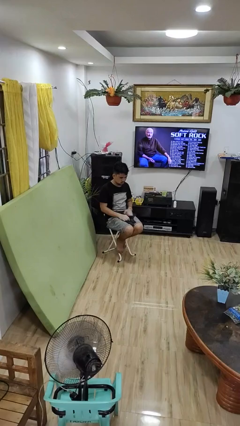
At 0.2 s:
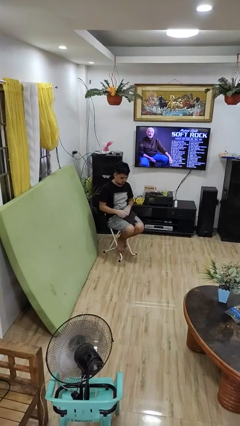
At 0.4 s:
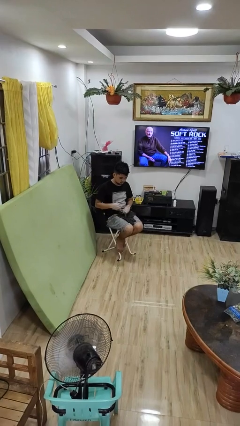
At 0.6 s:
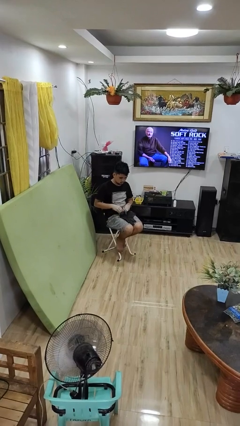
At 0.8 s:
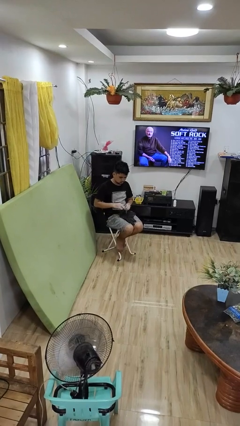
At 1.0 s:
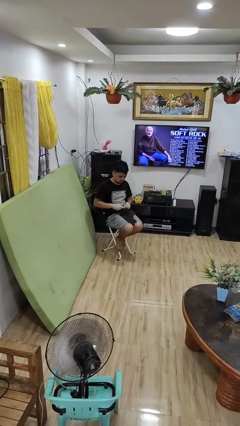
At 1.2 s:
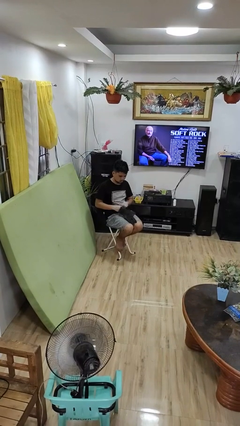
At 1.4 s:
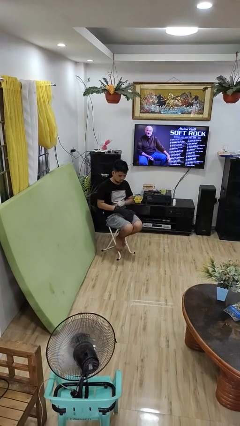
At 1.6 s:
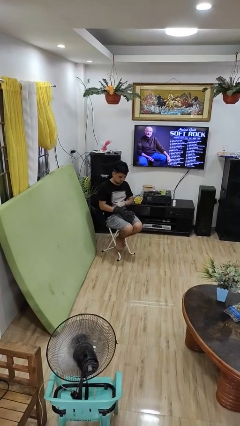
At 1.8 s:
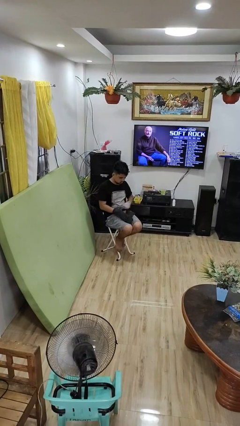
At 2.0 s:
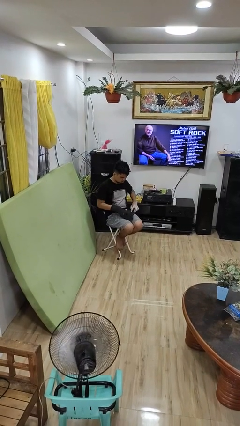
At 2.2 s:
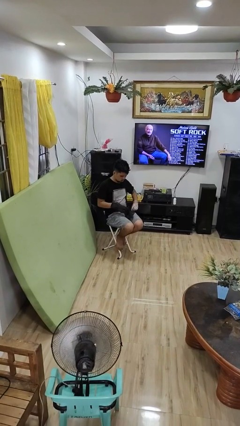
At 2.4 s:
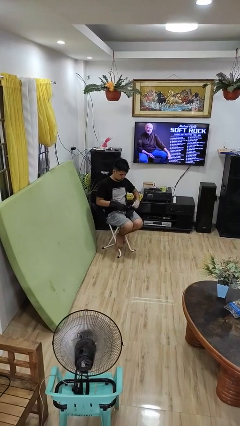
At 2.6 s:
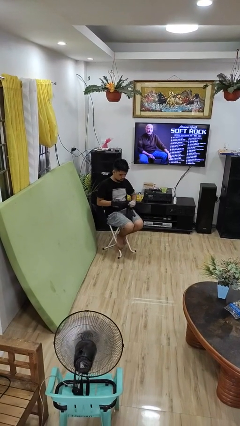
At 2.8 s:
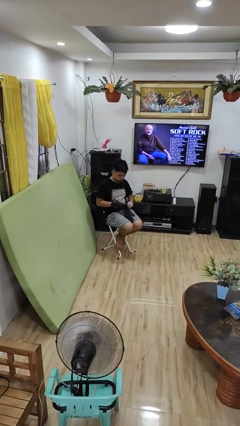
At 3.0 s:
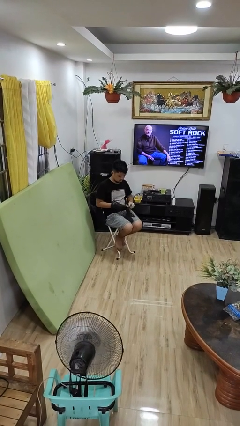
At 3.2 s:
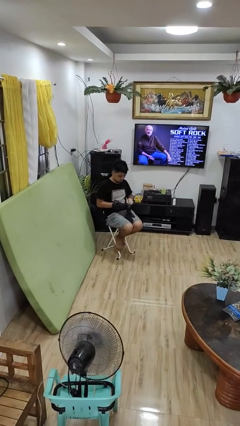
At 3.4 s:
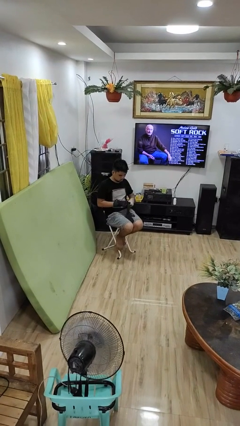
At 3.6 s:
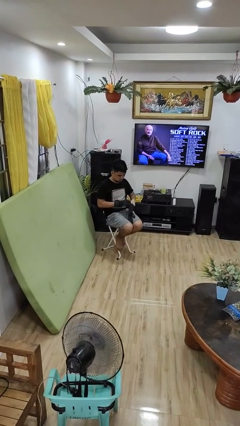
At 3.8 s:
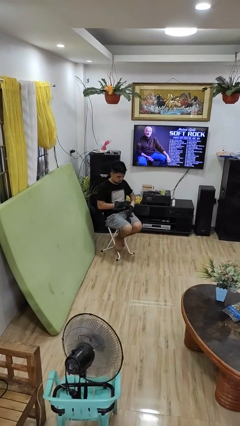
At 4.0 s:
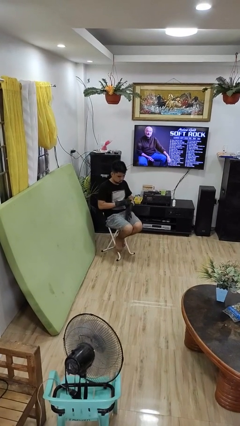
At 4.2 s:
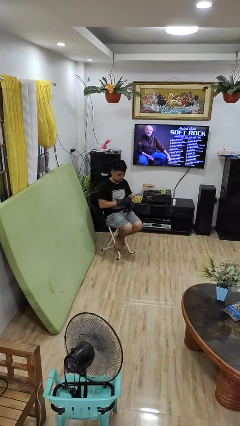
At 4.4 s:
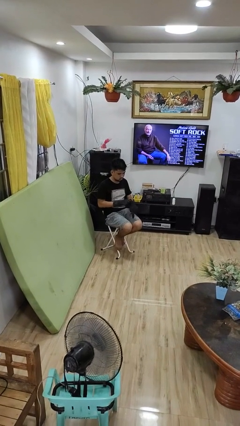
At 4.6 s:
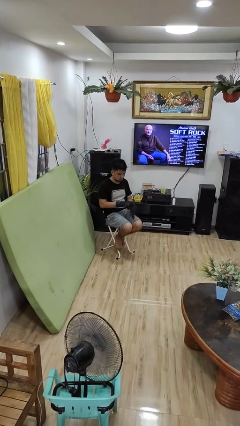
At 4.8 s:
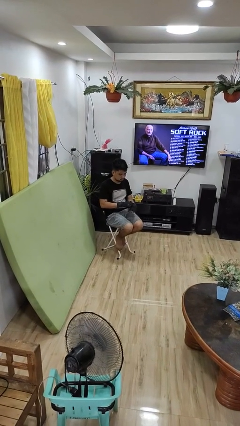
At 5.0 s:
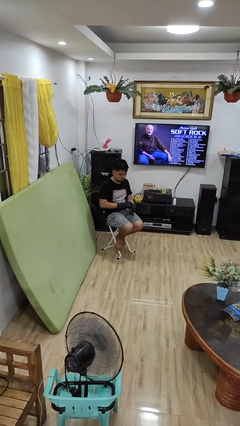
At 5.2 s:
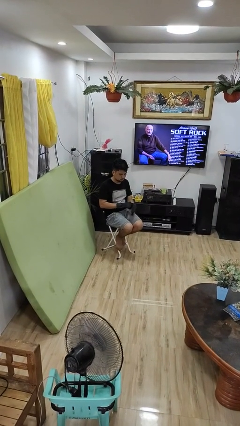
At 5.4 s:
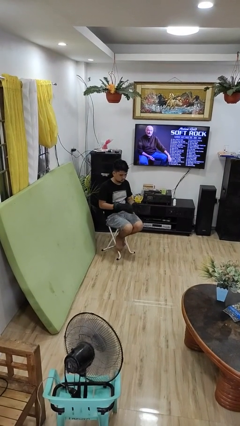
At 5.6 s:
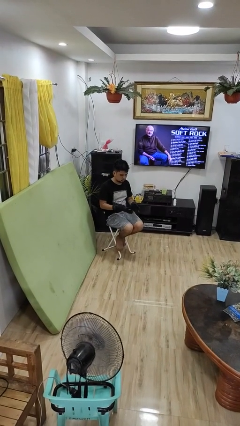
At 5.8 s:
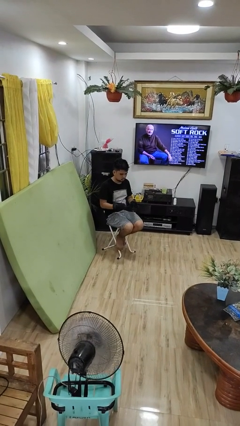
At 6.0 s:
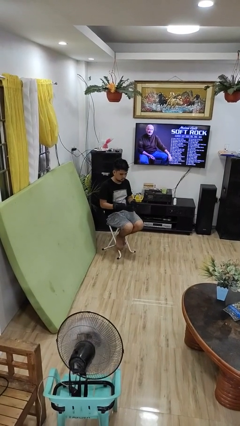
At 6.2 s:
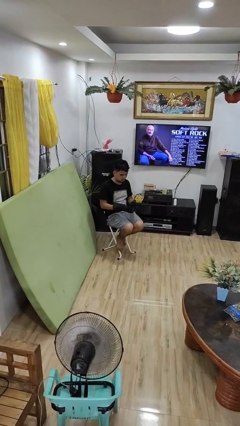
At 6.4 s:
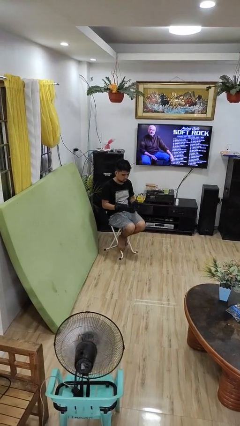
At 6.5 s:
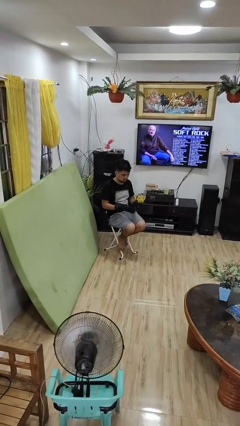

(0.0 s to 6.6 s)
person puts on gloves

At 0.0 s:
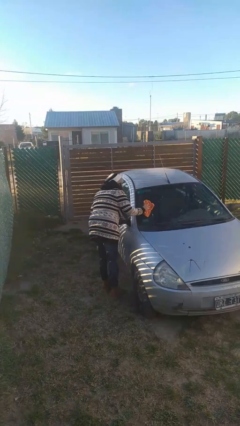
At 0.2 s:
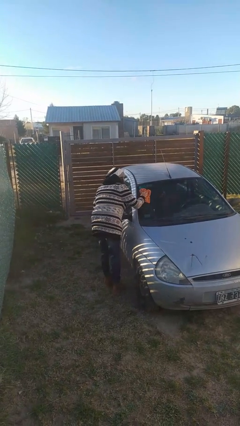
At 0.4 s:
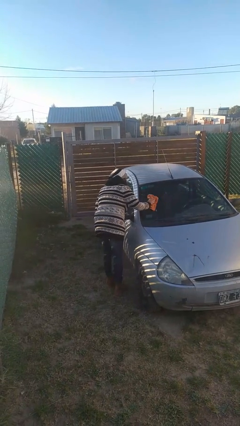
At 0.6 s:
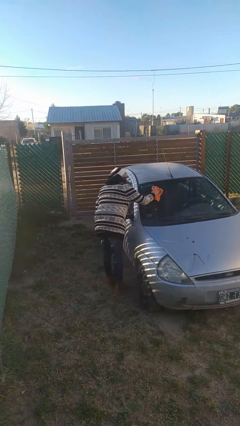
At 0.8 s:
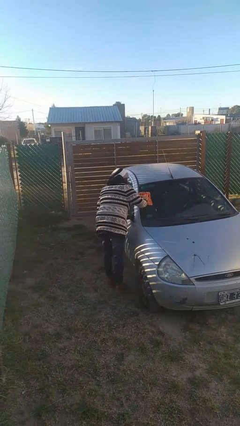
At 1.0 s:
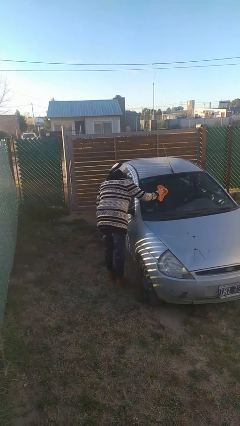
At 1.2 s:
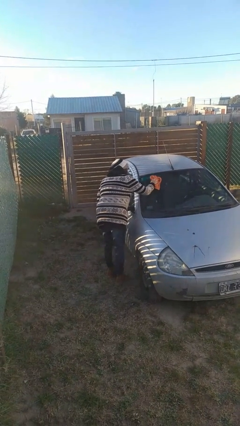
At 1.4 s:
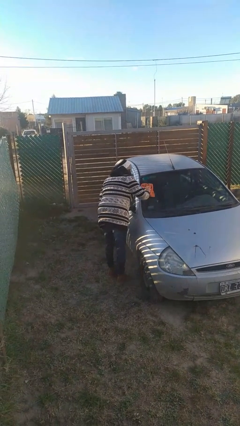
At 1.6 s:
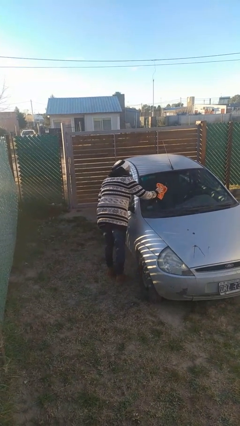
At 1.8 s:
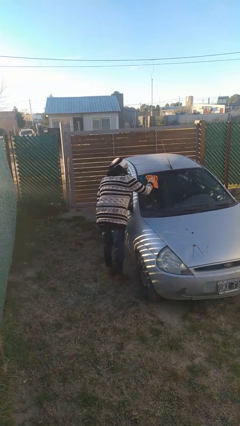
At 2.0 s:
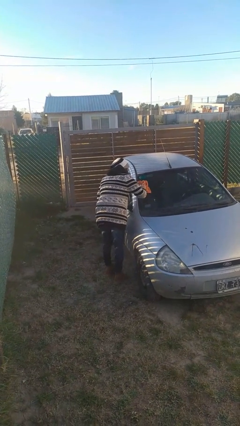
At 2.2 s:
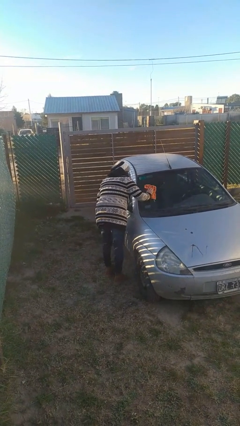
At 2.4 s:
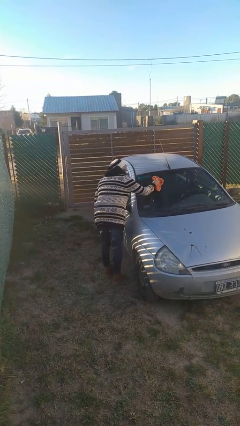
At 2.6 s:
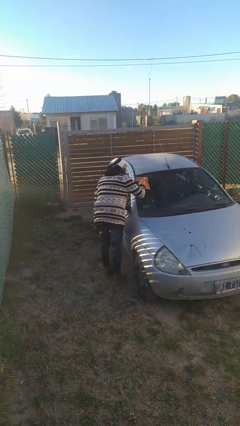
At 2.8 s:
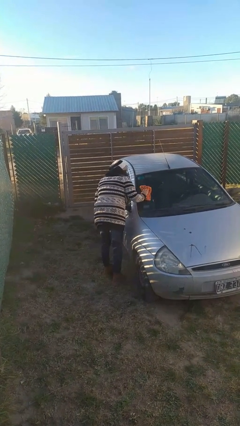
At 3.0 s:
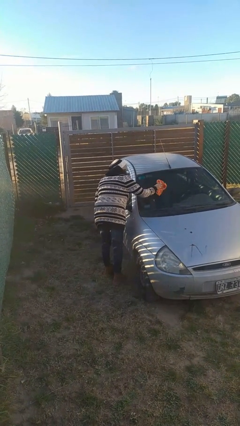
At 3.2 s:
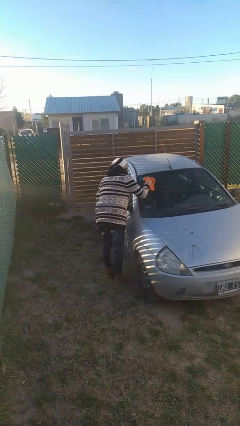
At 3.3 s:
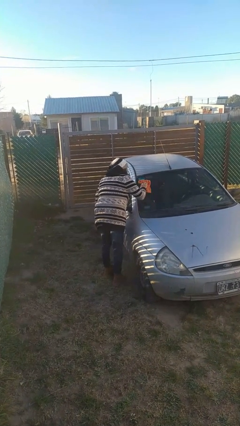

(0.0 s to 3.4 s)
person polishes car with rag

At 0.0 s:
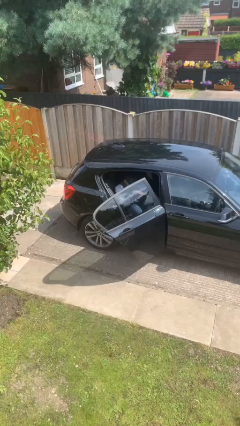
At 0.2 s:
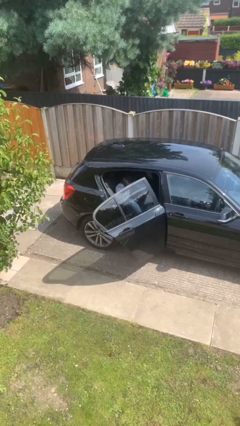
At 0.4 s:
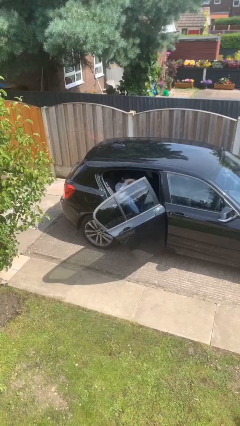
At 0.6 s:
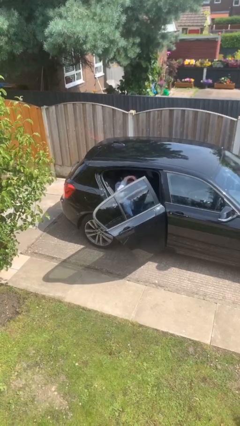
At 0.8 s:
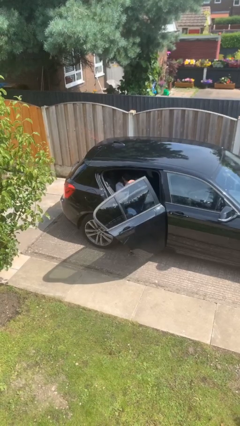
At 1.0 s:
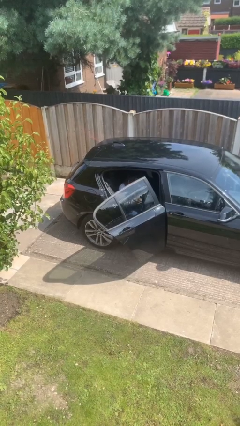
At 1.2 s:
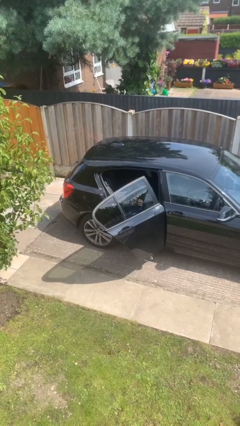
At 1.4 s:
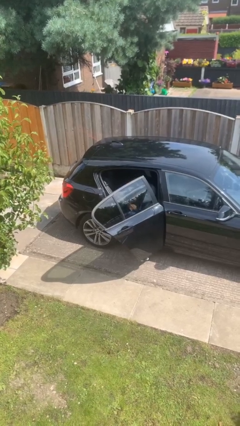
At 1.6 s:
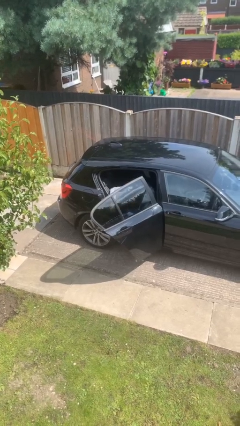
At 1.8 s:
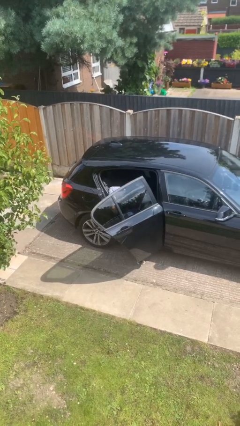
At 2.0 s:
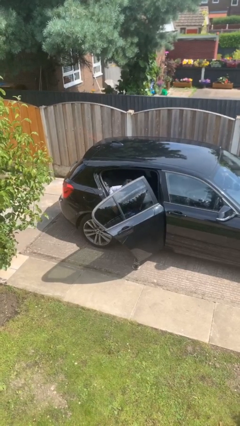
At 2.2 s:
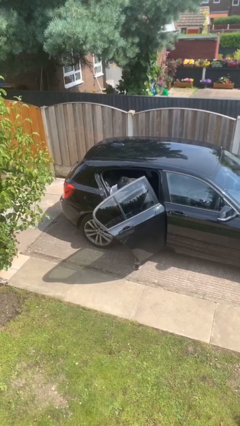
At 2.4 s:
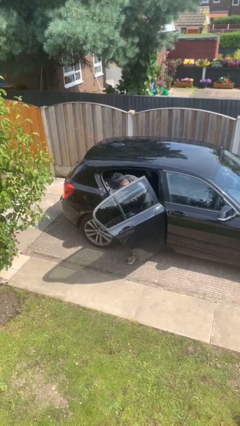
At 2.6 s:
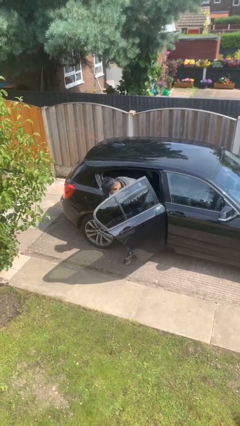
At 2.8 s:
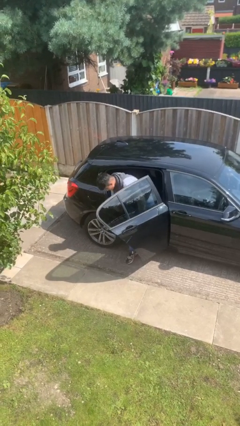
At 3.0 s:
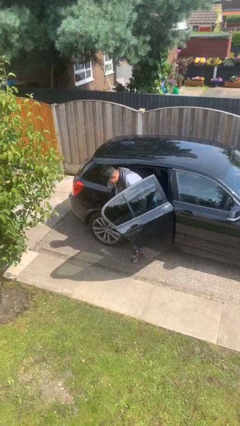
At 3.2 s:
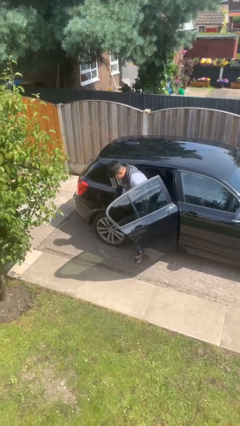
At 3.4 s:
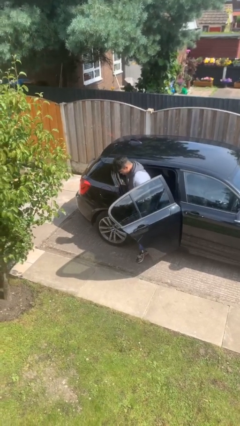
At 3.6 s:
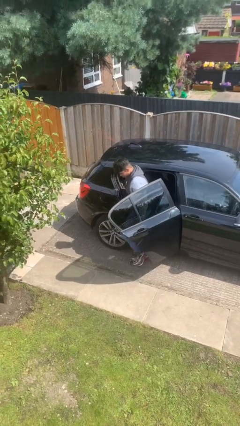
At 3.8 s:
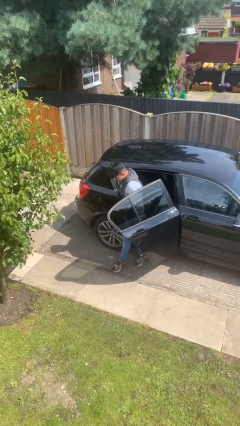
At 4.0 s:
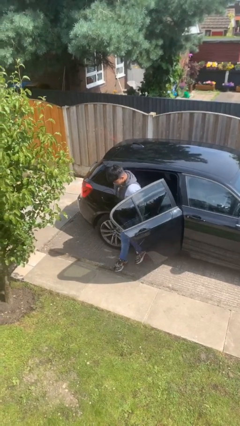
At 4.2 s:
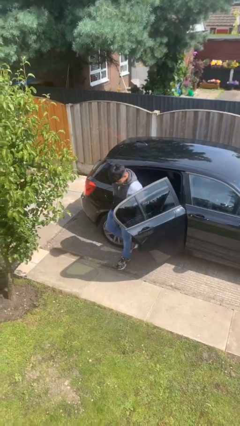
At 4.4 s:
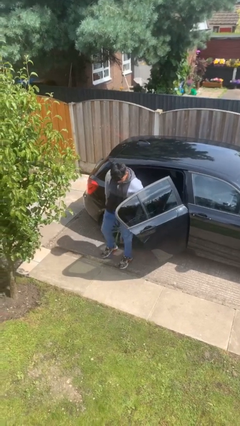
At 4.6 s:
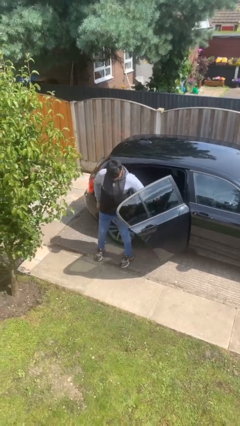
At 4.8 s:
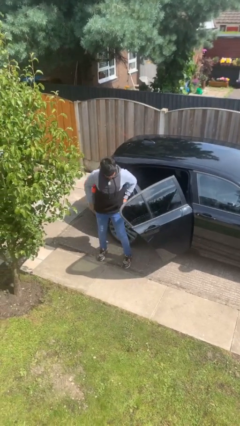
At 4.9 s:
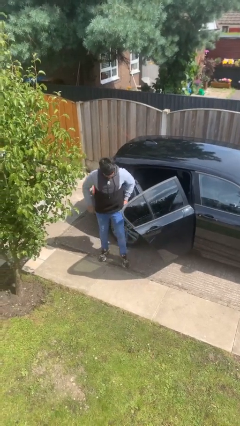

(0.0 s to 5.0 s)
person exits car

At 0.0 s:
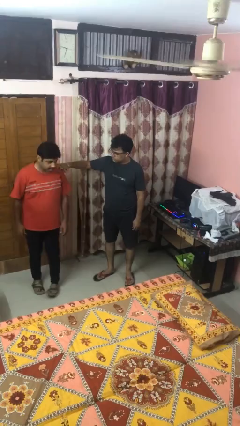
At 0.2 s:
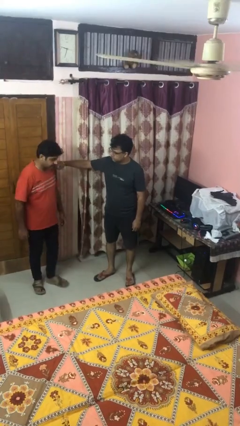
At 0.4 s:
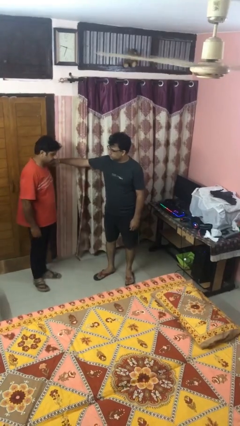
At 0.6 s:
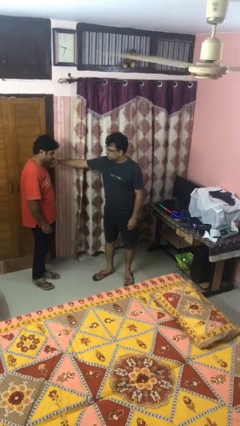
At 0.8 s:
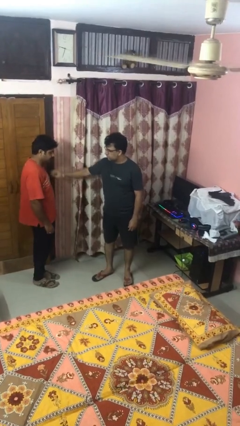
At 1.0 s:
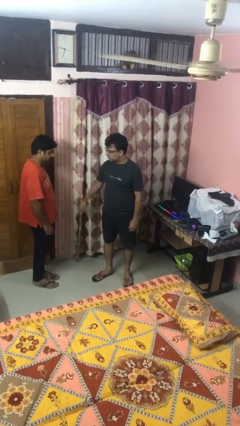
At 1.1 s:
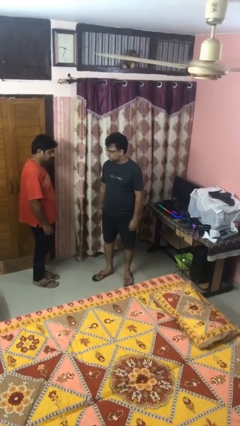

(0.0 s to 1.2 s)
person spins person around

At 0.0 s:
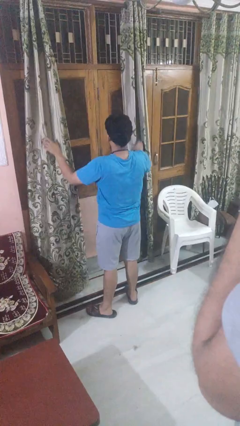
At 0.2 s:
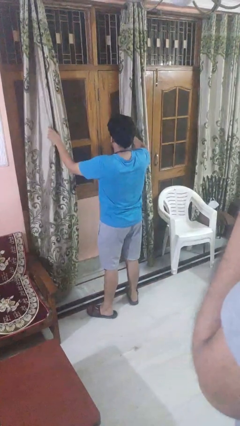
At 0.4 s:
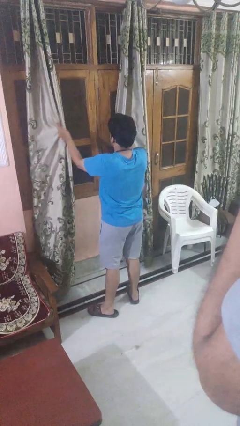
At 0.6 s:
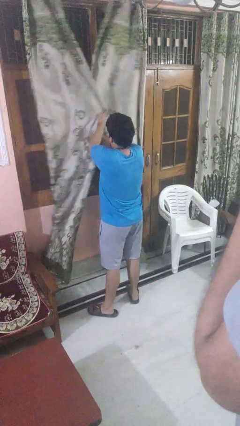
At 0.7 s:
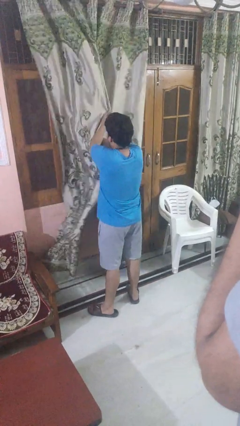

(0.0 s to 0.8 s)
person closes curtains

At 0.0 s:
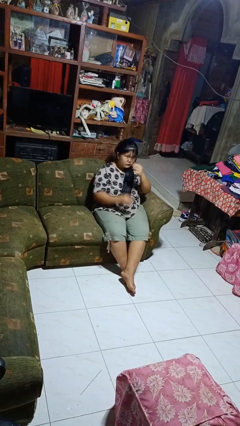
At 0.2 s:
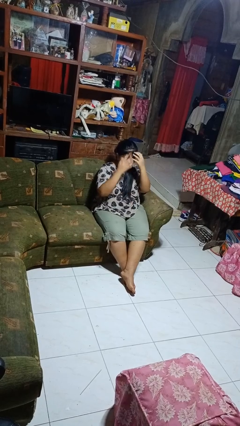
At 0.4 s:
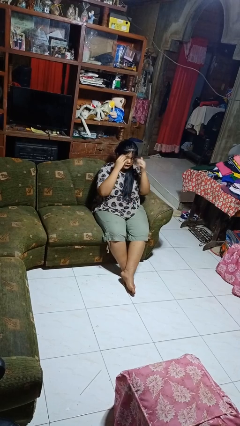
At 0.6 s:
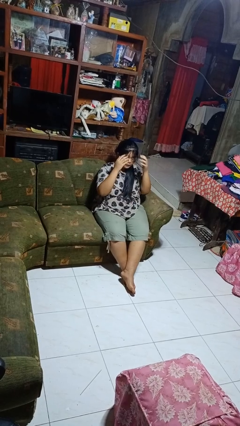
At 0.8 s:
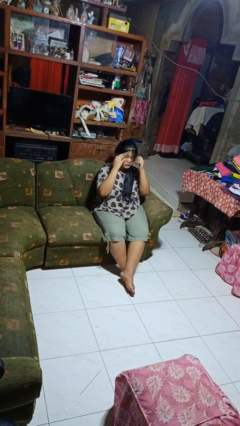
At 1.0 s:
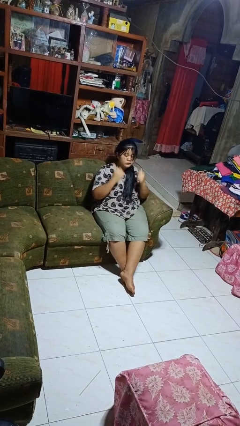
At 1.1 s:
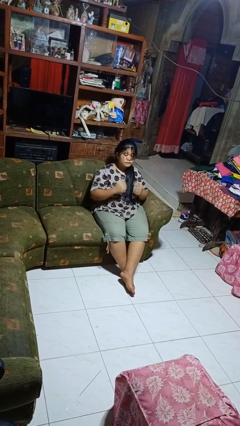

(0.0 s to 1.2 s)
person strokes hair
